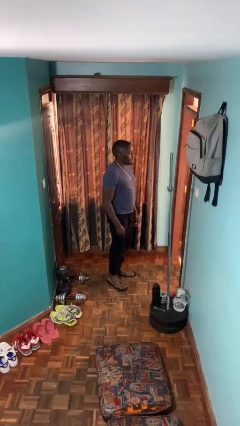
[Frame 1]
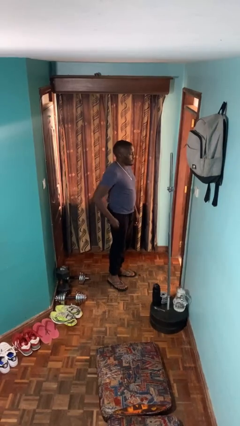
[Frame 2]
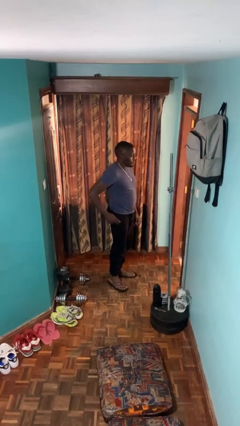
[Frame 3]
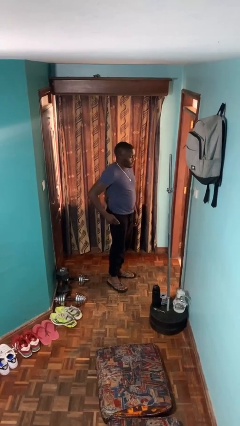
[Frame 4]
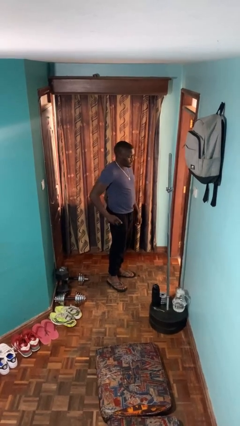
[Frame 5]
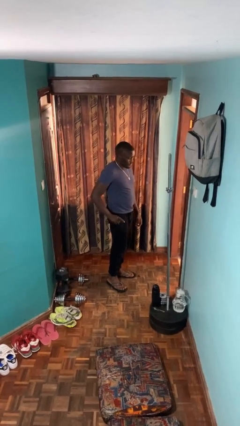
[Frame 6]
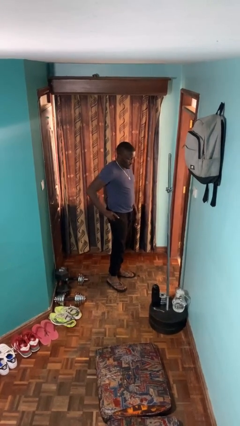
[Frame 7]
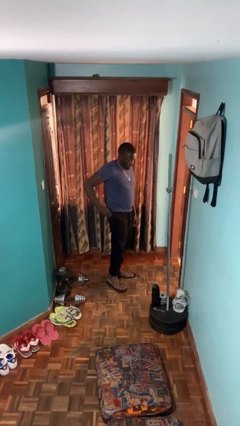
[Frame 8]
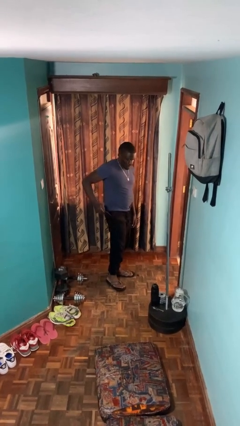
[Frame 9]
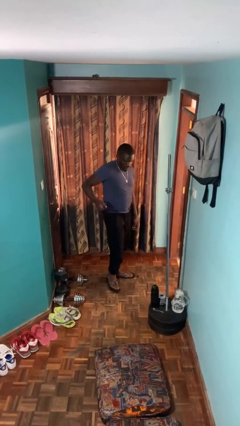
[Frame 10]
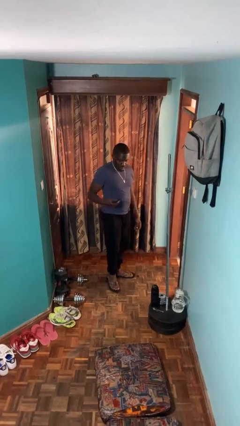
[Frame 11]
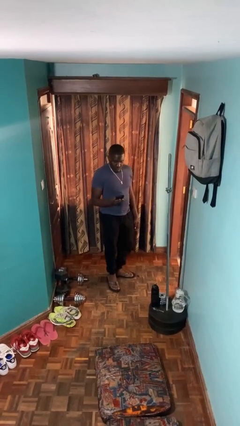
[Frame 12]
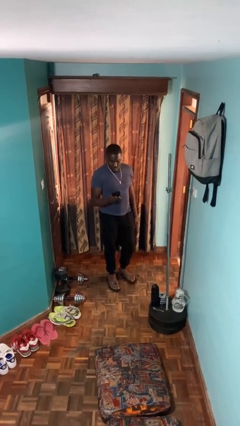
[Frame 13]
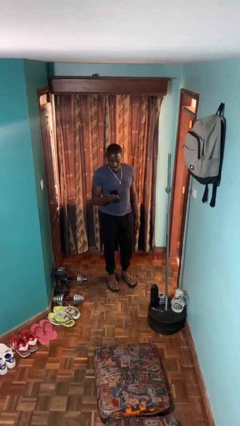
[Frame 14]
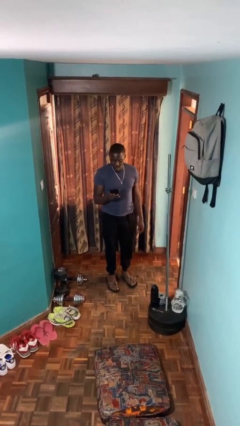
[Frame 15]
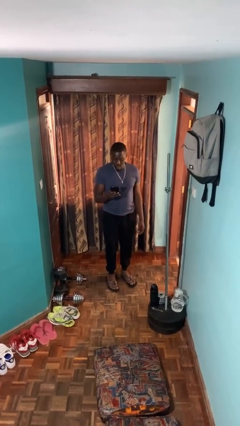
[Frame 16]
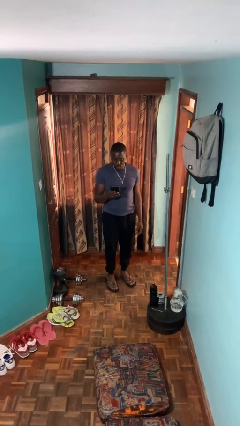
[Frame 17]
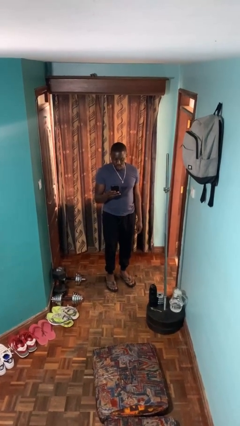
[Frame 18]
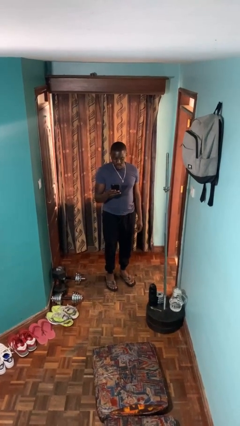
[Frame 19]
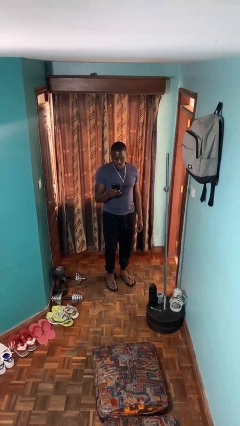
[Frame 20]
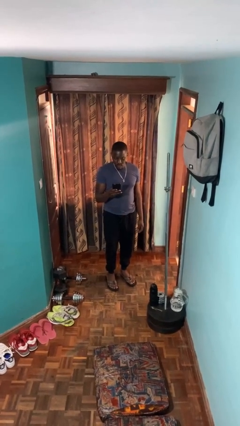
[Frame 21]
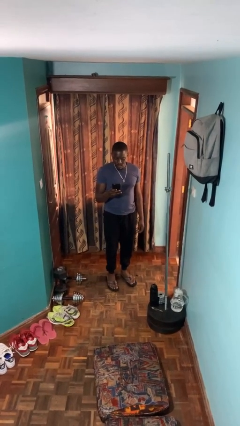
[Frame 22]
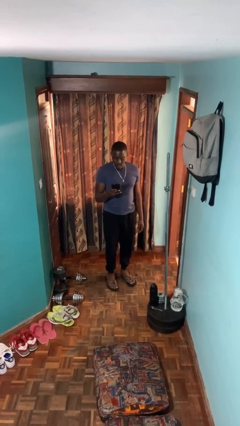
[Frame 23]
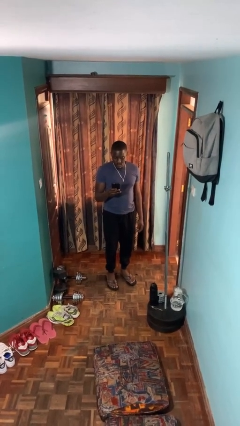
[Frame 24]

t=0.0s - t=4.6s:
person takes phone from pocket

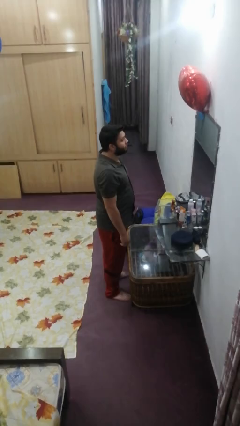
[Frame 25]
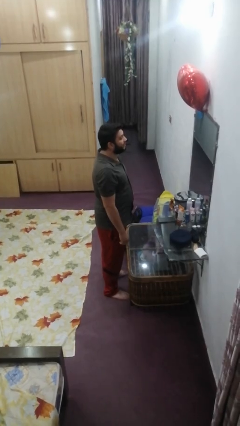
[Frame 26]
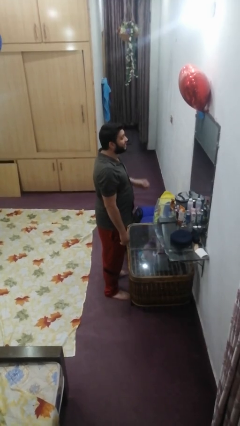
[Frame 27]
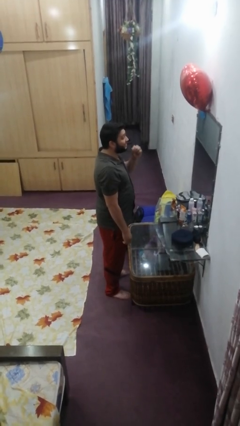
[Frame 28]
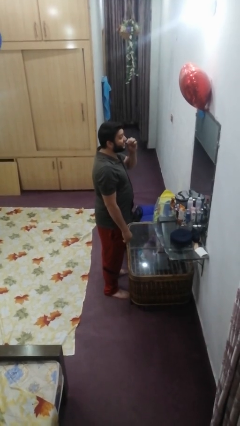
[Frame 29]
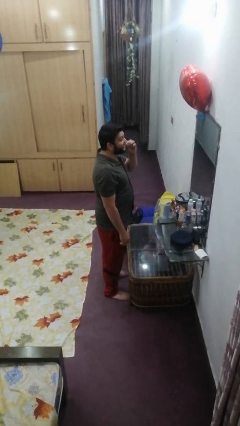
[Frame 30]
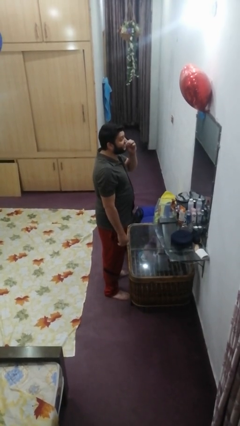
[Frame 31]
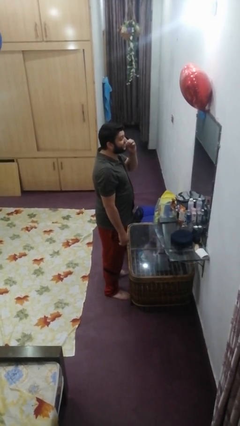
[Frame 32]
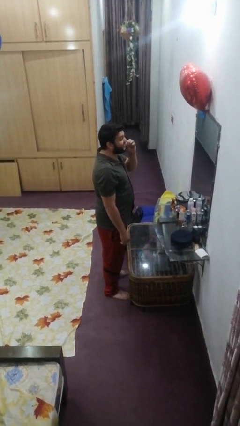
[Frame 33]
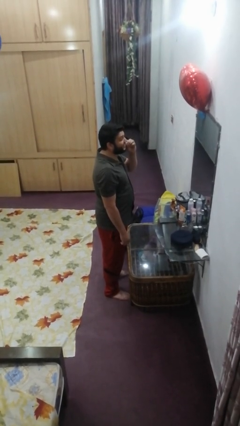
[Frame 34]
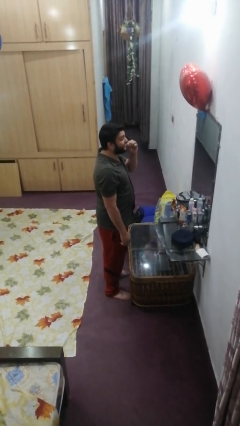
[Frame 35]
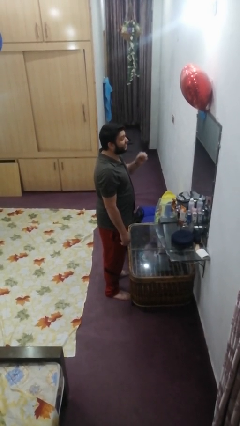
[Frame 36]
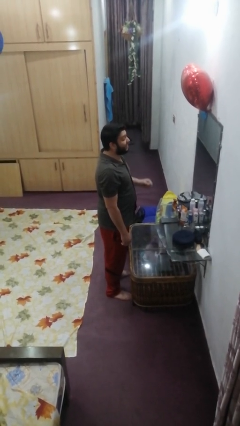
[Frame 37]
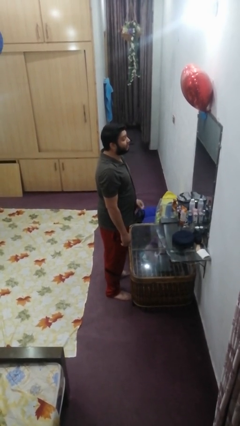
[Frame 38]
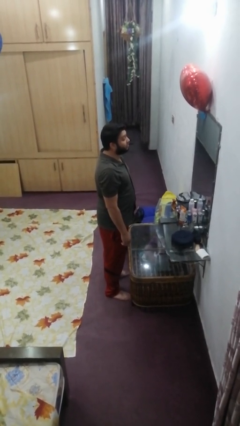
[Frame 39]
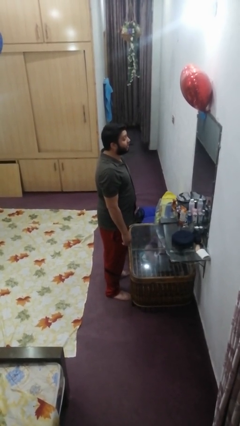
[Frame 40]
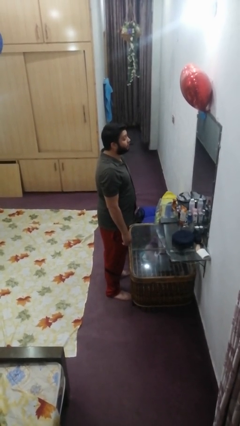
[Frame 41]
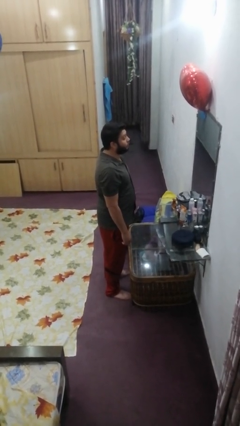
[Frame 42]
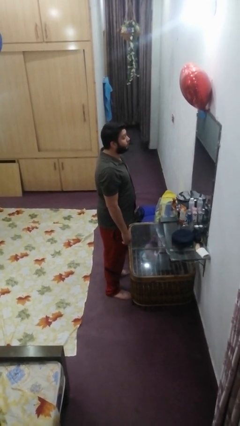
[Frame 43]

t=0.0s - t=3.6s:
person flosses

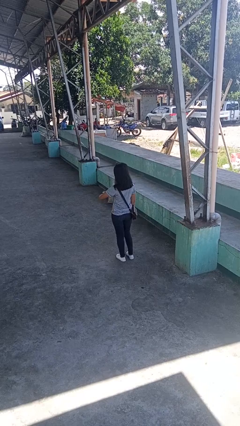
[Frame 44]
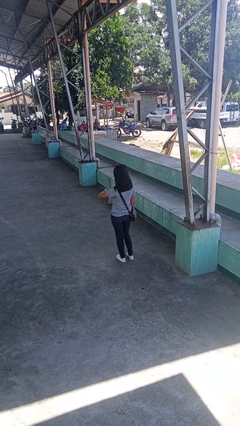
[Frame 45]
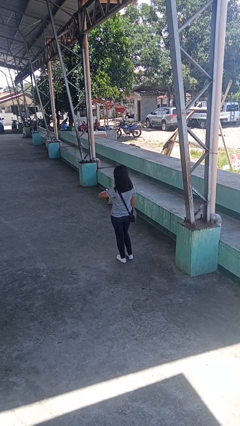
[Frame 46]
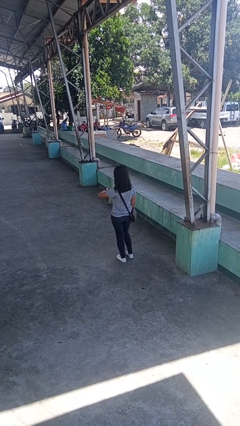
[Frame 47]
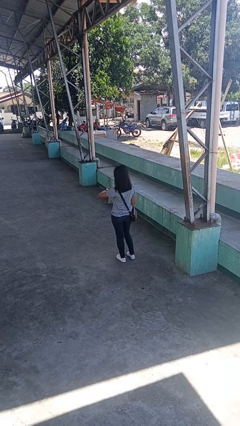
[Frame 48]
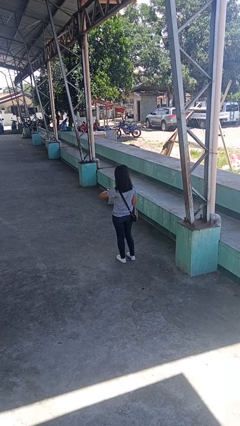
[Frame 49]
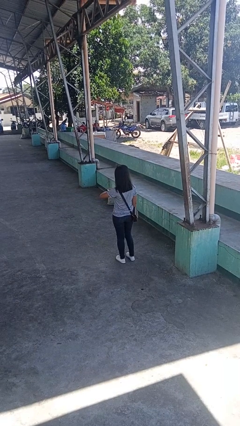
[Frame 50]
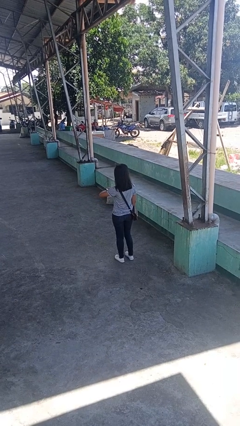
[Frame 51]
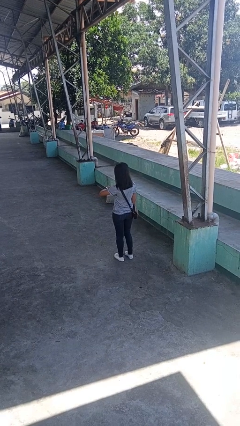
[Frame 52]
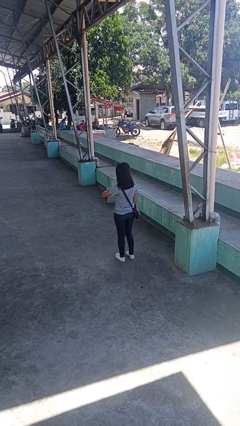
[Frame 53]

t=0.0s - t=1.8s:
person looks at wristwatch

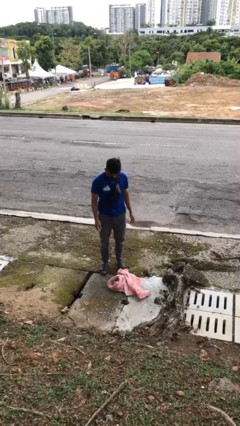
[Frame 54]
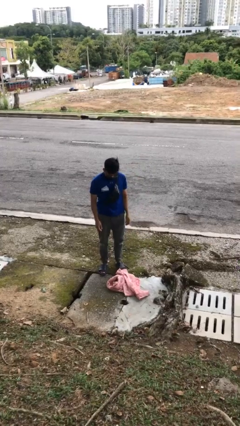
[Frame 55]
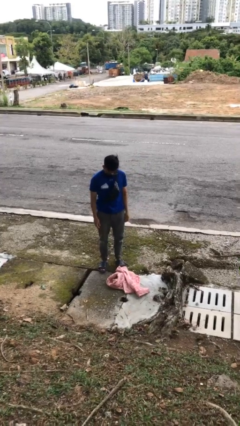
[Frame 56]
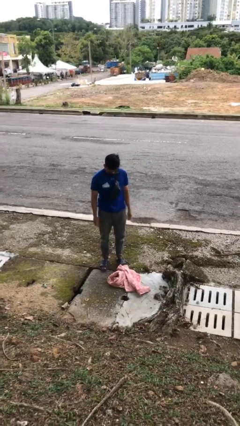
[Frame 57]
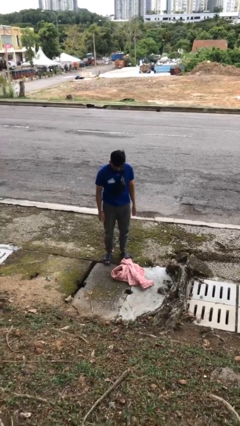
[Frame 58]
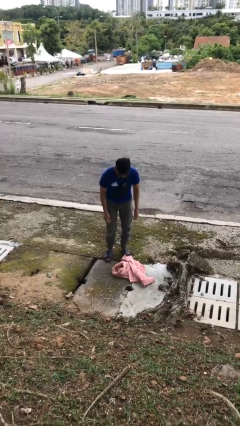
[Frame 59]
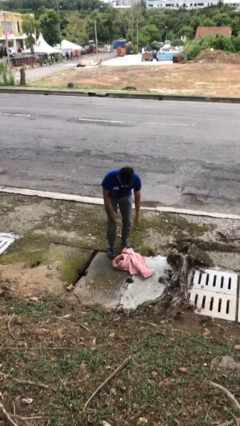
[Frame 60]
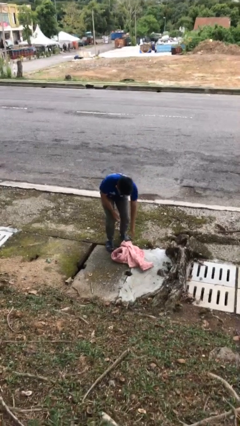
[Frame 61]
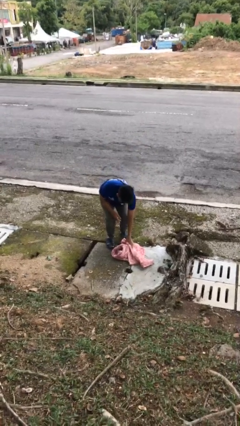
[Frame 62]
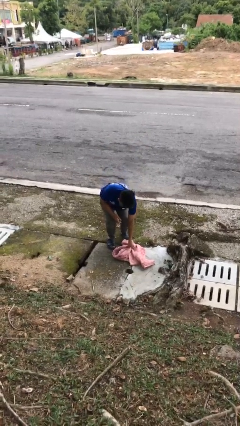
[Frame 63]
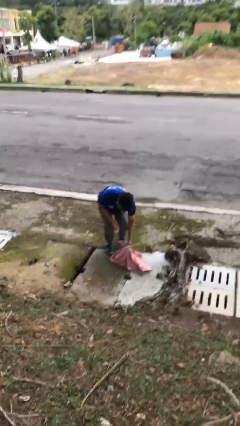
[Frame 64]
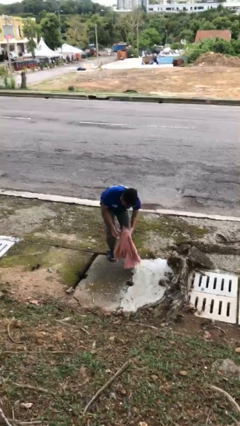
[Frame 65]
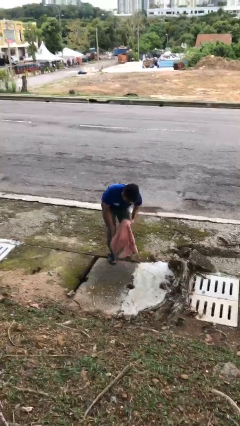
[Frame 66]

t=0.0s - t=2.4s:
person picks up object from floor

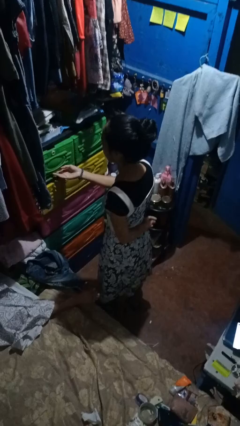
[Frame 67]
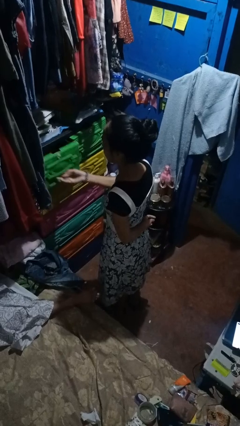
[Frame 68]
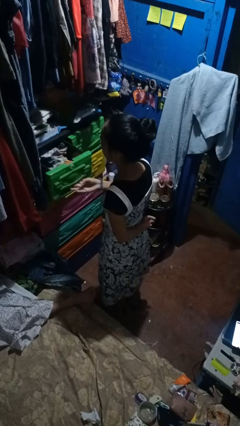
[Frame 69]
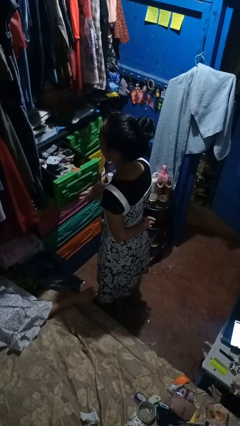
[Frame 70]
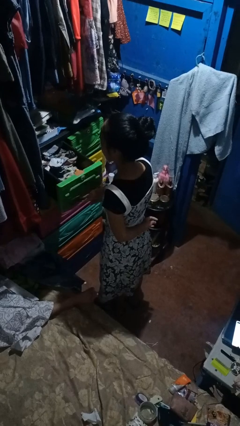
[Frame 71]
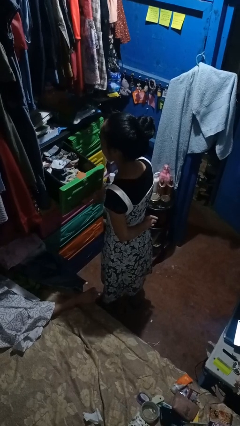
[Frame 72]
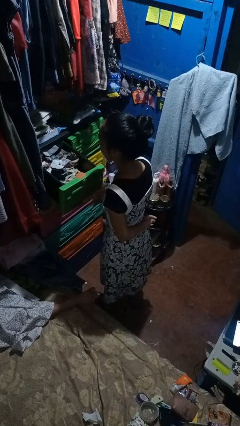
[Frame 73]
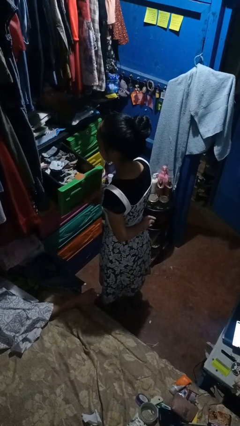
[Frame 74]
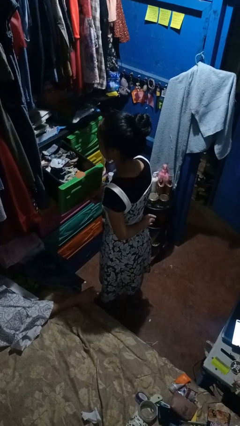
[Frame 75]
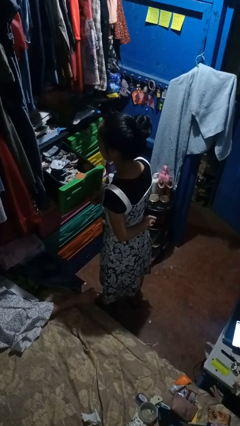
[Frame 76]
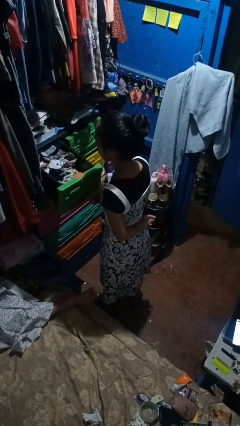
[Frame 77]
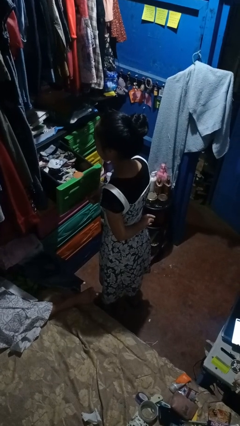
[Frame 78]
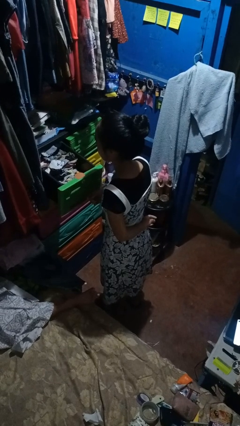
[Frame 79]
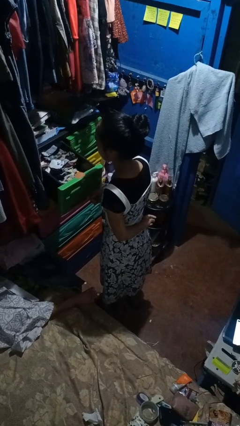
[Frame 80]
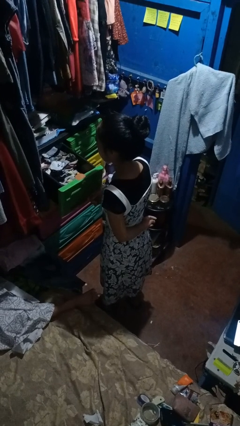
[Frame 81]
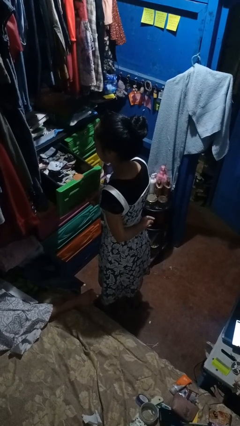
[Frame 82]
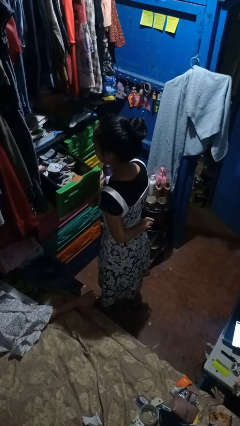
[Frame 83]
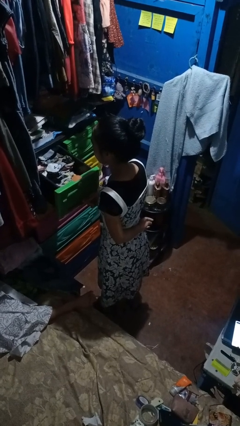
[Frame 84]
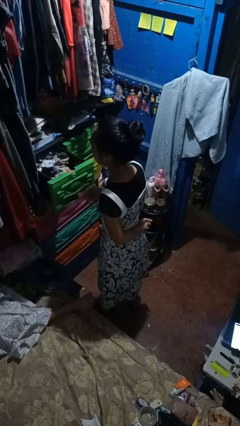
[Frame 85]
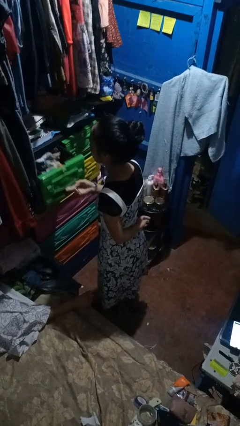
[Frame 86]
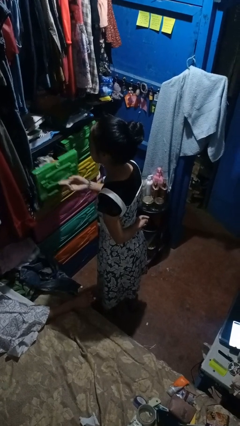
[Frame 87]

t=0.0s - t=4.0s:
person opens dresser drawer

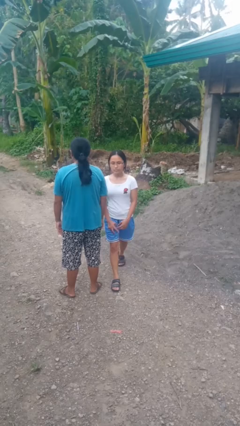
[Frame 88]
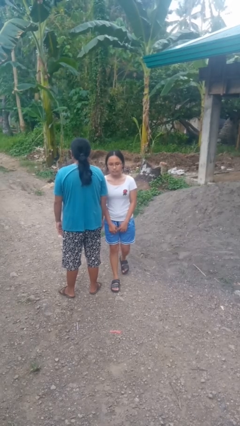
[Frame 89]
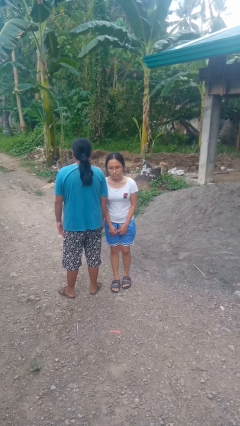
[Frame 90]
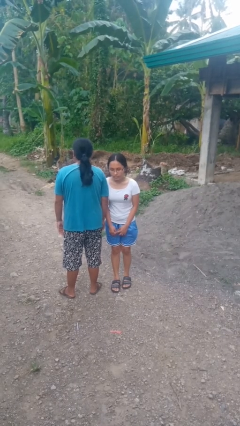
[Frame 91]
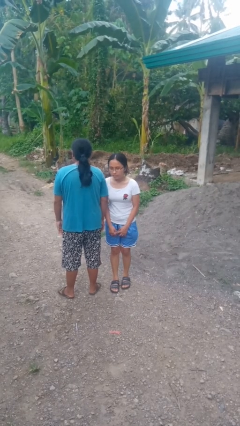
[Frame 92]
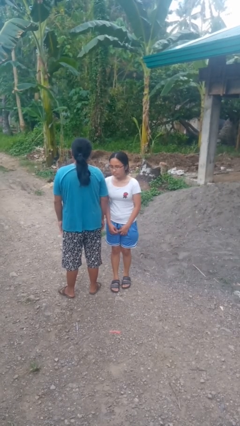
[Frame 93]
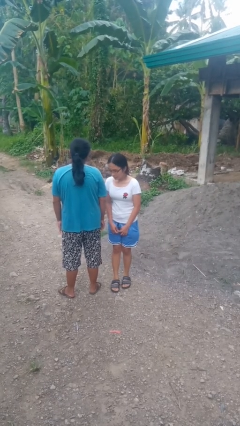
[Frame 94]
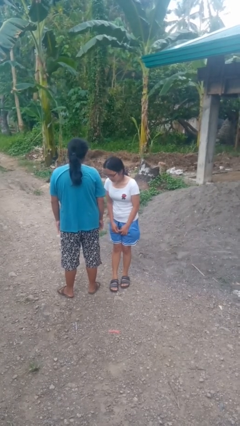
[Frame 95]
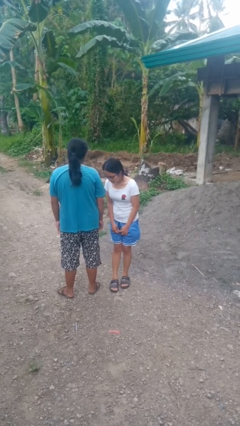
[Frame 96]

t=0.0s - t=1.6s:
person bumps into person
